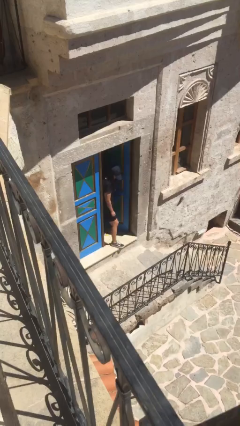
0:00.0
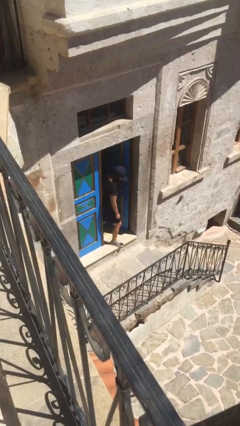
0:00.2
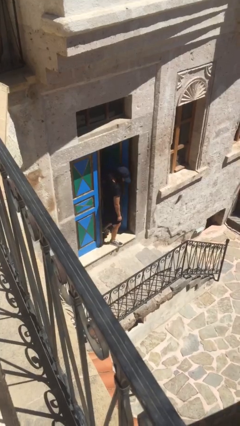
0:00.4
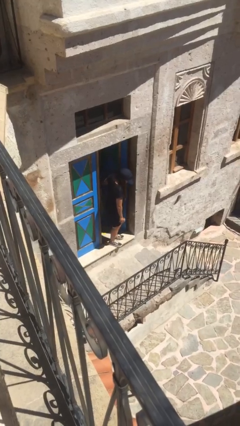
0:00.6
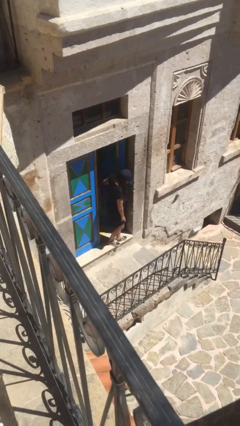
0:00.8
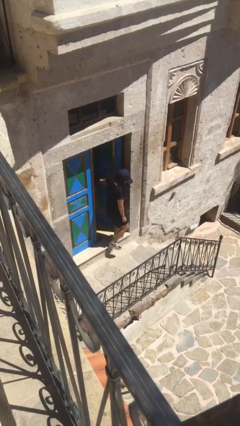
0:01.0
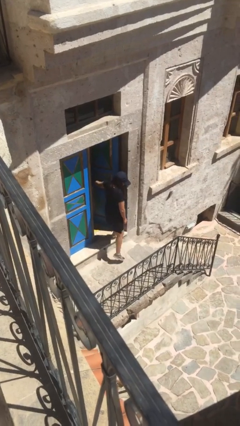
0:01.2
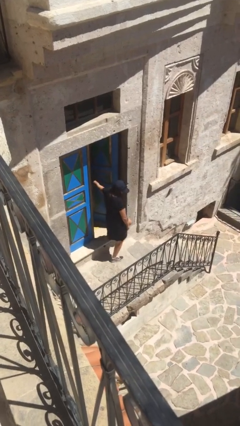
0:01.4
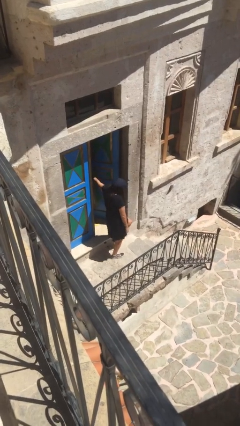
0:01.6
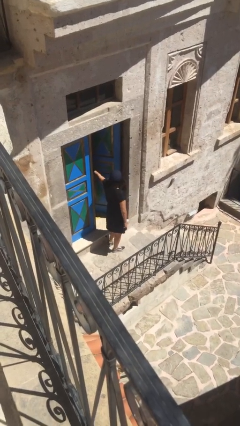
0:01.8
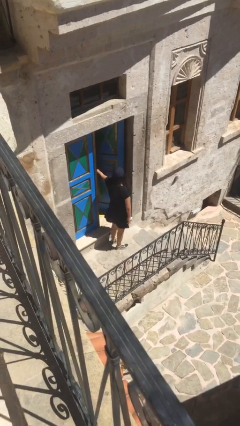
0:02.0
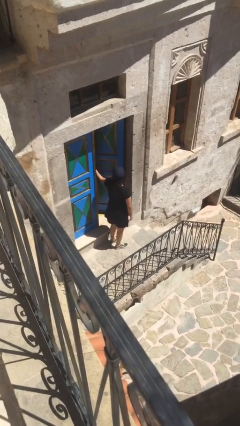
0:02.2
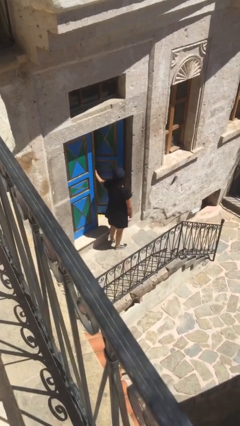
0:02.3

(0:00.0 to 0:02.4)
person enters scene through structure

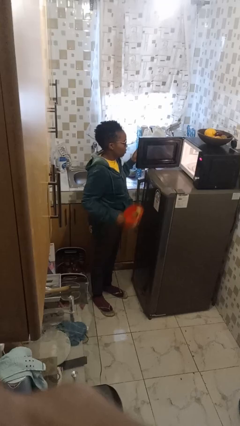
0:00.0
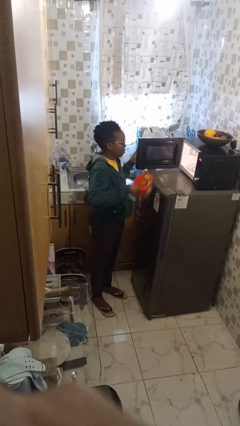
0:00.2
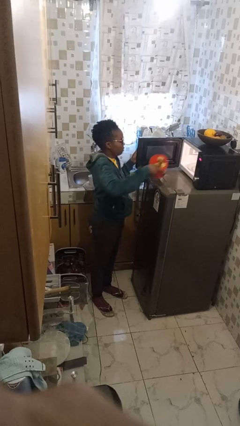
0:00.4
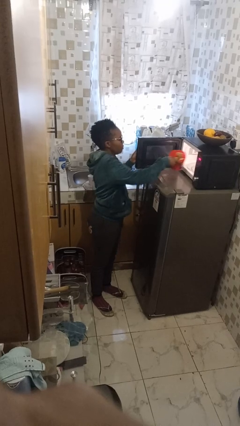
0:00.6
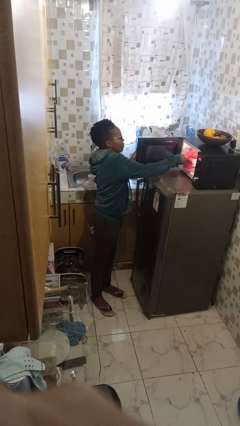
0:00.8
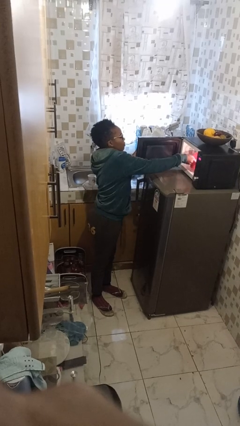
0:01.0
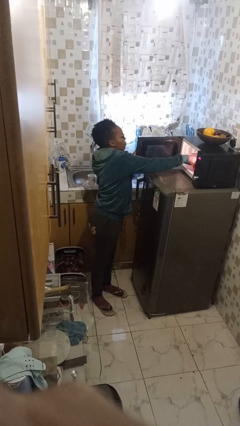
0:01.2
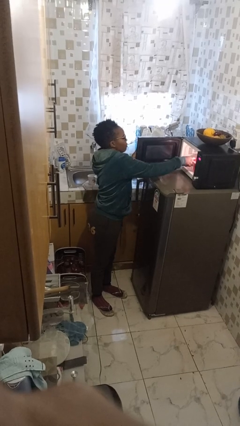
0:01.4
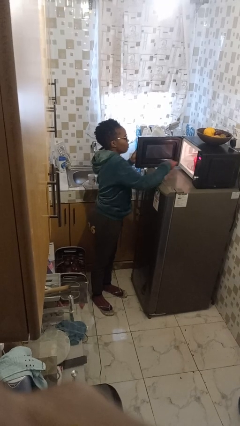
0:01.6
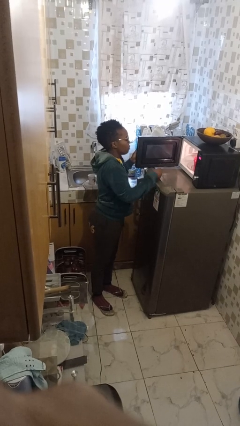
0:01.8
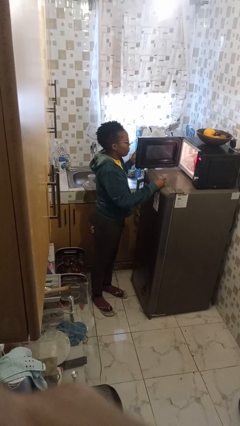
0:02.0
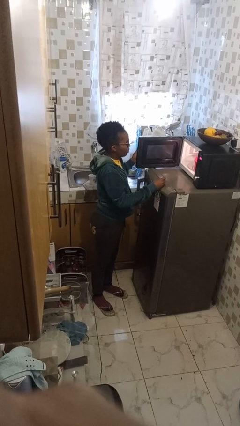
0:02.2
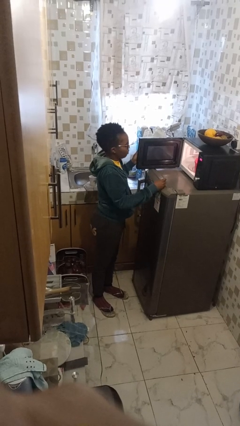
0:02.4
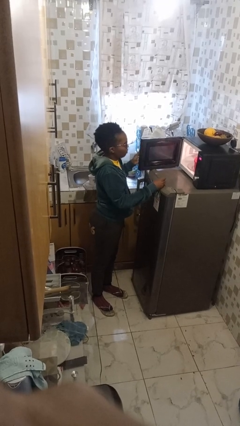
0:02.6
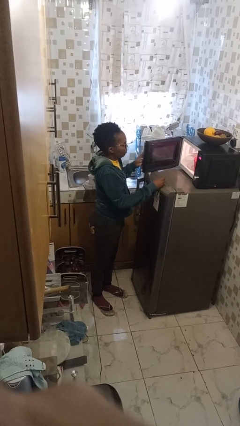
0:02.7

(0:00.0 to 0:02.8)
person puts object into microwave

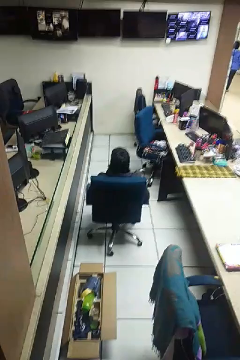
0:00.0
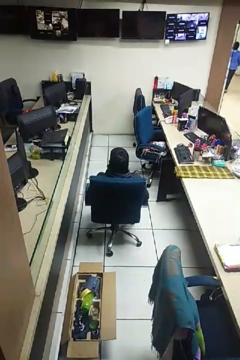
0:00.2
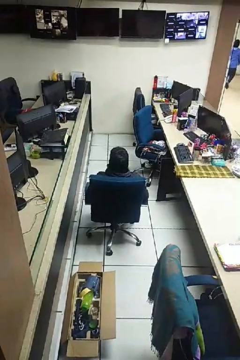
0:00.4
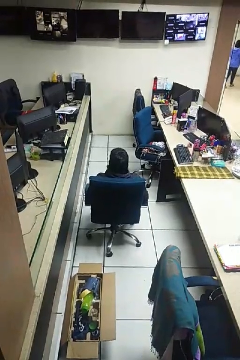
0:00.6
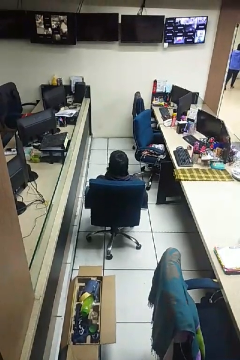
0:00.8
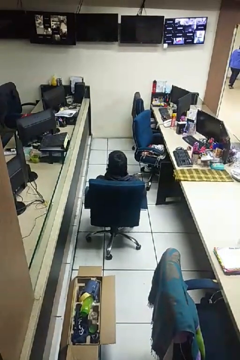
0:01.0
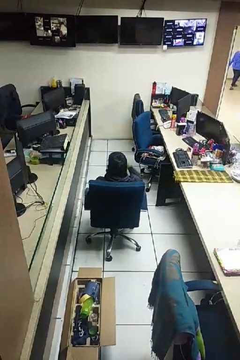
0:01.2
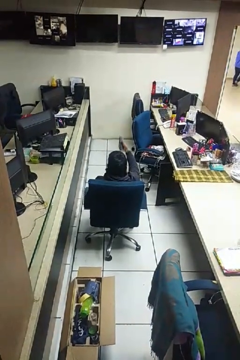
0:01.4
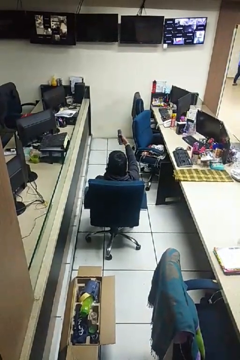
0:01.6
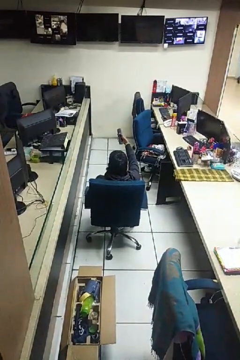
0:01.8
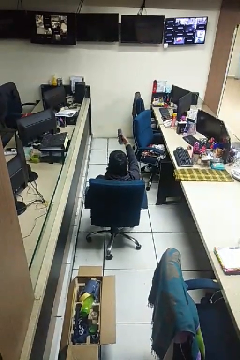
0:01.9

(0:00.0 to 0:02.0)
person uses television remote

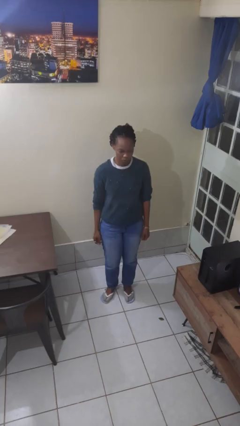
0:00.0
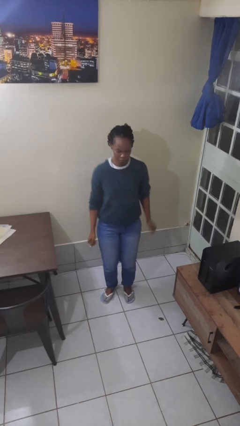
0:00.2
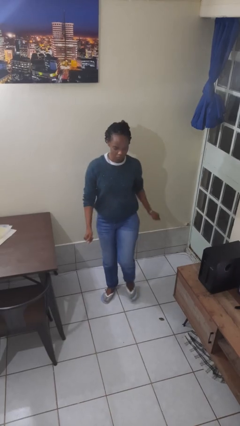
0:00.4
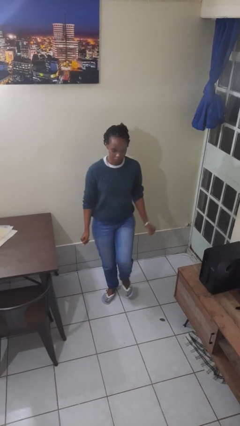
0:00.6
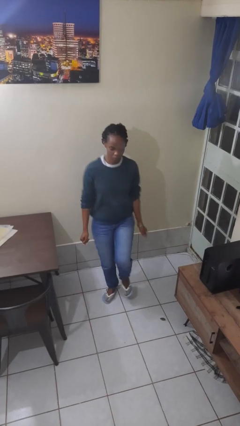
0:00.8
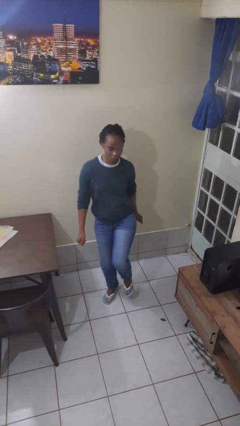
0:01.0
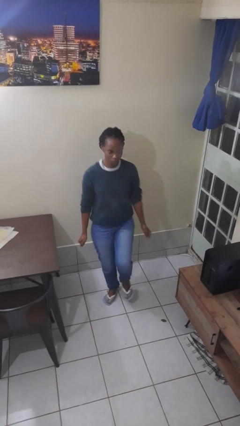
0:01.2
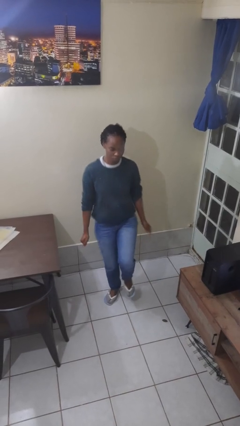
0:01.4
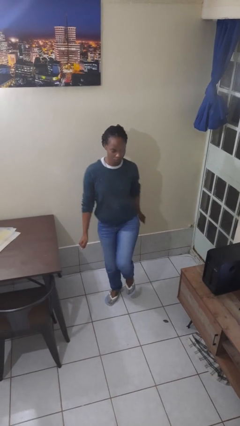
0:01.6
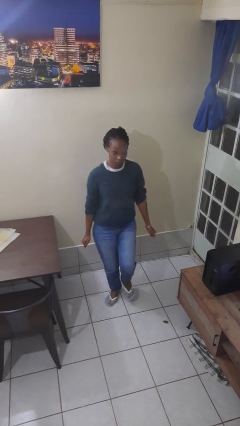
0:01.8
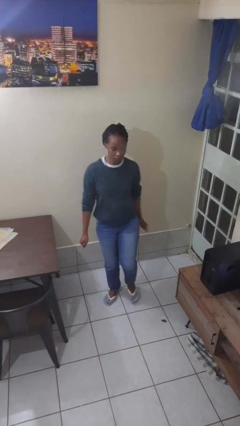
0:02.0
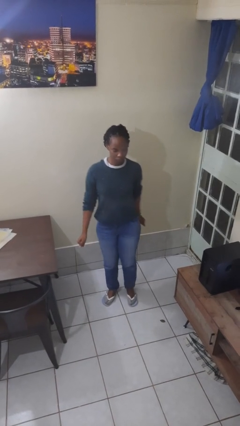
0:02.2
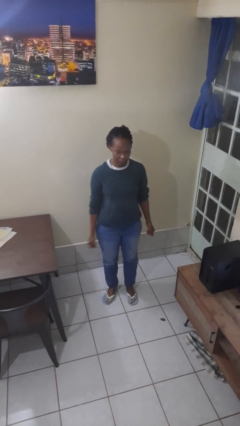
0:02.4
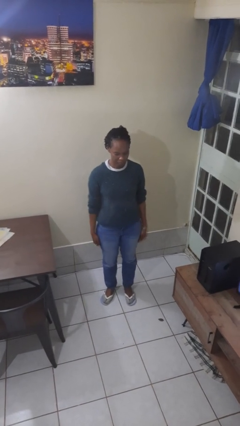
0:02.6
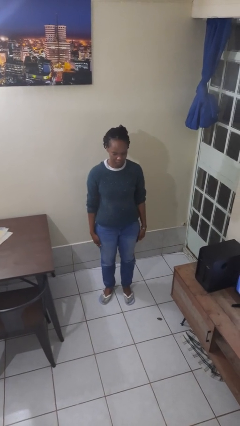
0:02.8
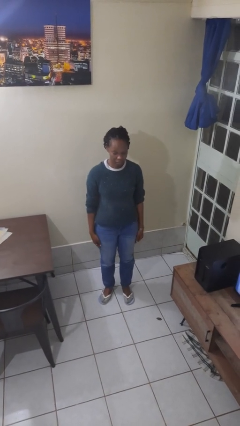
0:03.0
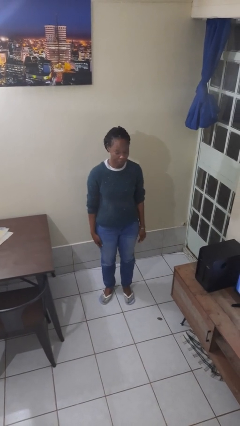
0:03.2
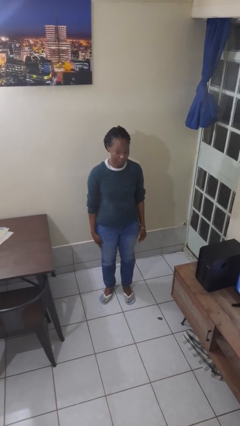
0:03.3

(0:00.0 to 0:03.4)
person dances in place

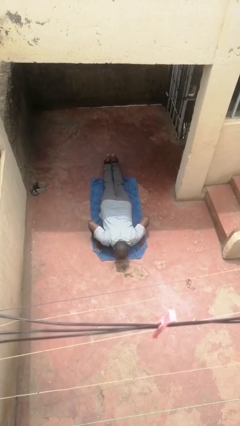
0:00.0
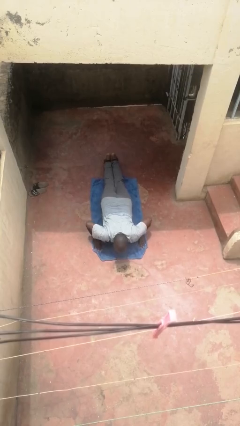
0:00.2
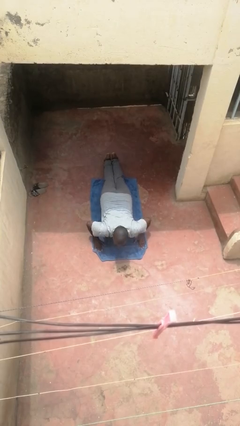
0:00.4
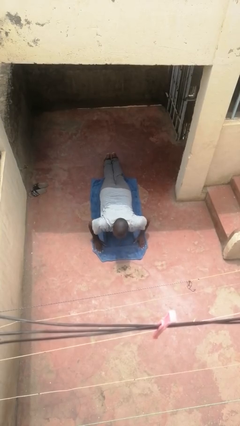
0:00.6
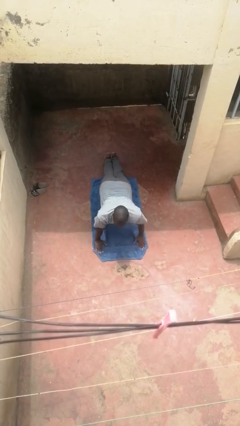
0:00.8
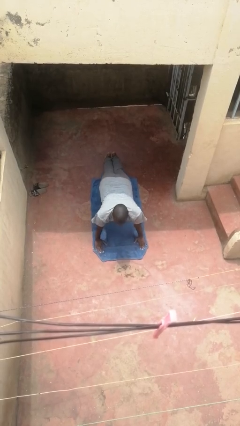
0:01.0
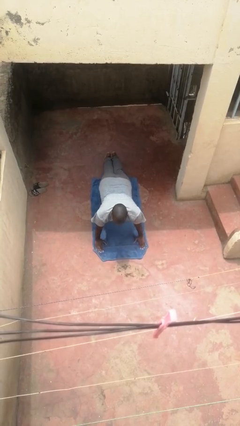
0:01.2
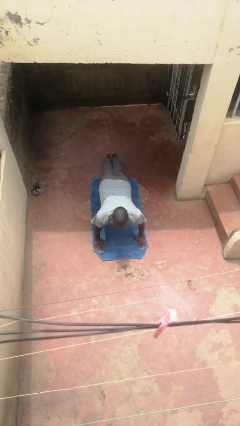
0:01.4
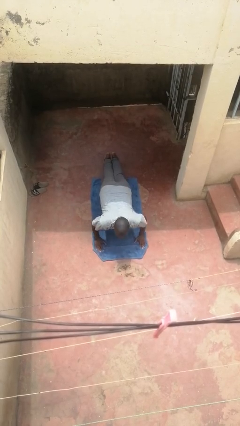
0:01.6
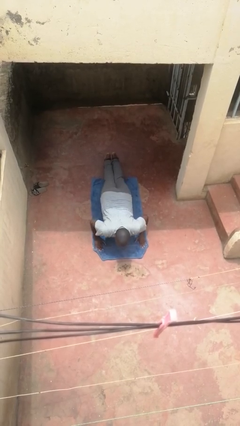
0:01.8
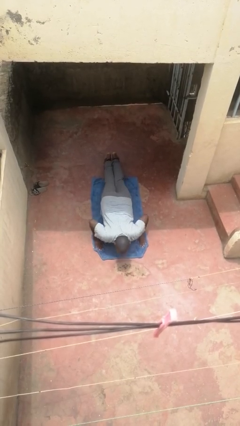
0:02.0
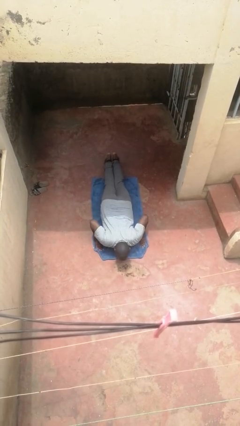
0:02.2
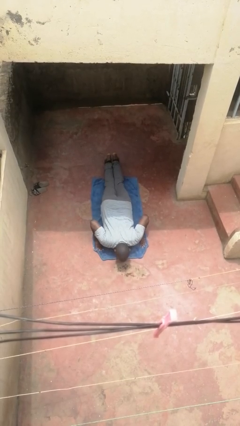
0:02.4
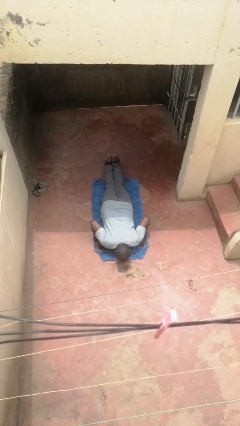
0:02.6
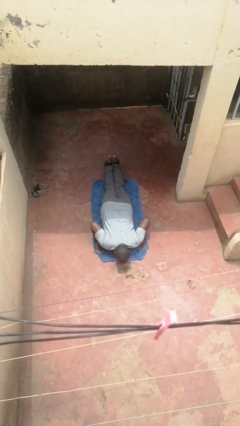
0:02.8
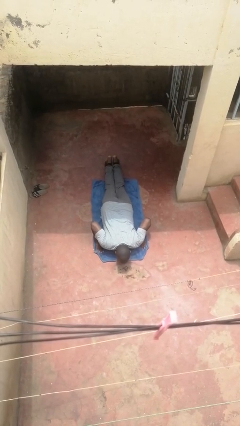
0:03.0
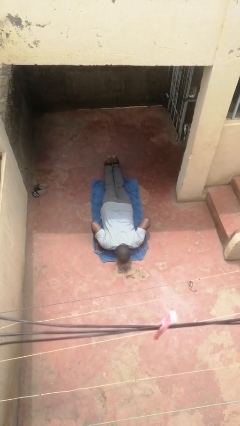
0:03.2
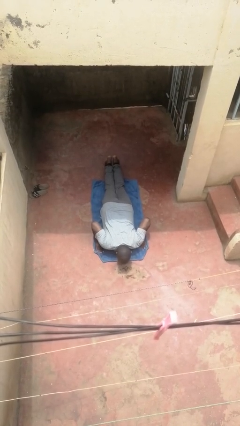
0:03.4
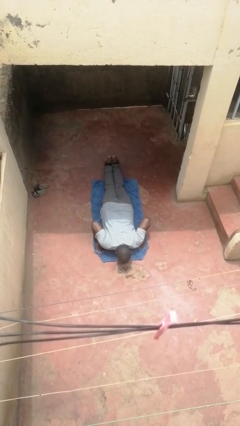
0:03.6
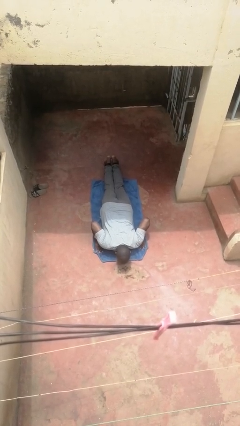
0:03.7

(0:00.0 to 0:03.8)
person exercises with pushup

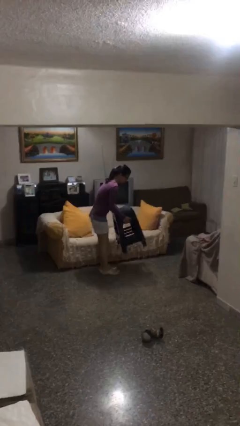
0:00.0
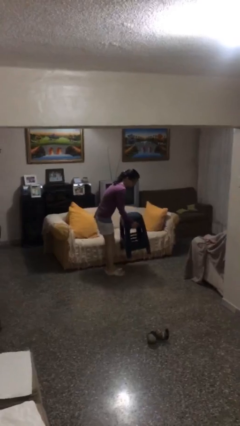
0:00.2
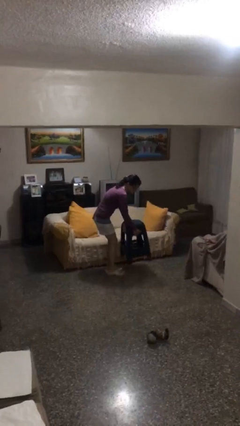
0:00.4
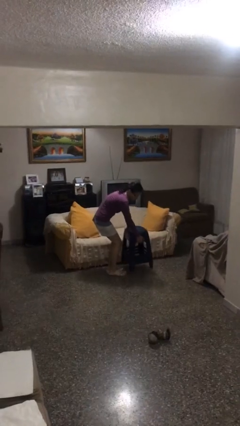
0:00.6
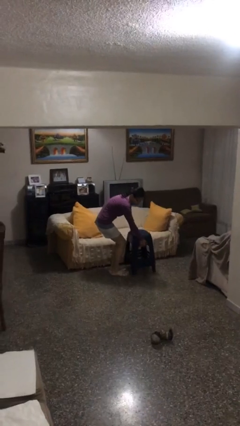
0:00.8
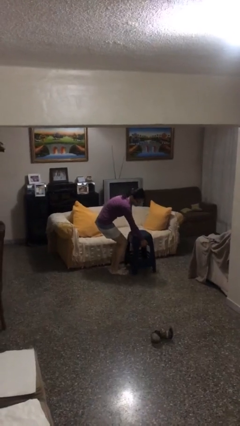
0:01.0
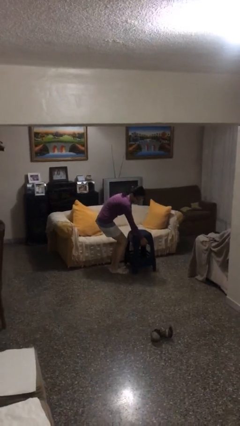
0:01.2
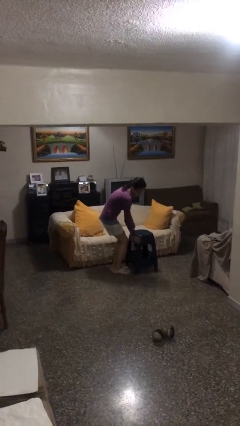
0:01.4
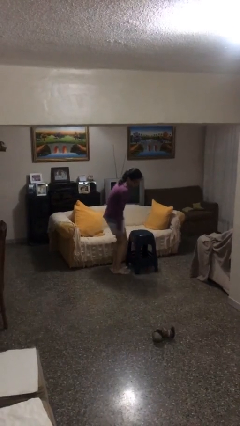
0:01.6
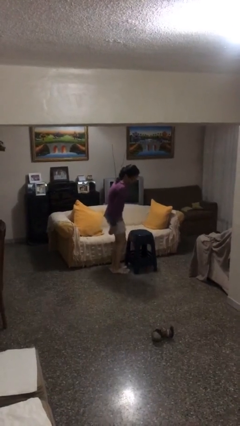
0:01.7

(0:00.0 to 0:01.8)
person puts down object on floor

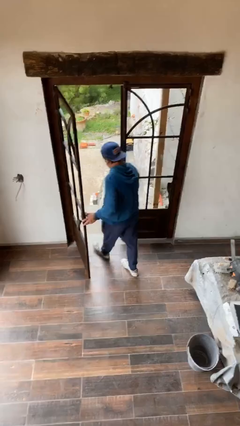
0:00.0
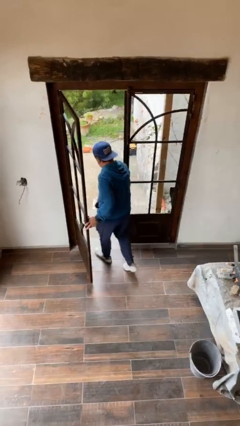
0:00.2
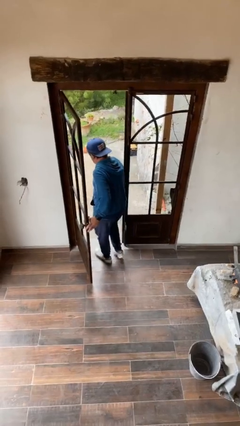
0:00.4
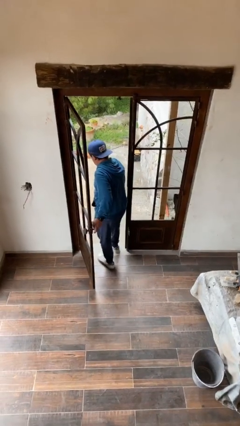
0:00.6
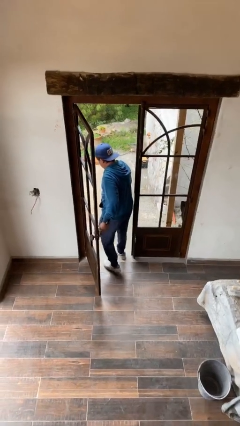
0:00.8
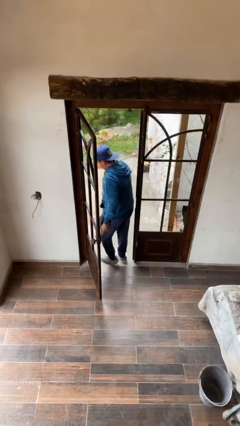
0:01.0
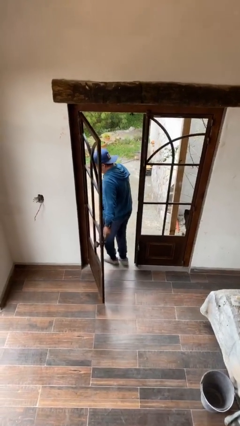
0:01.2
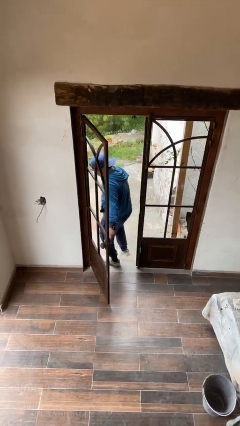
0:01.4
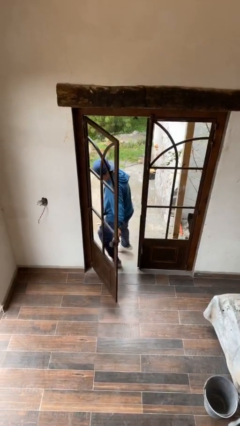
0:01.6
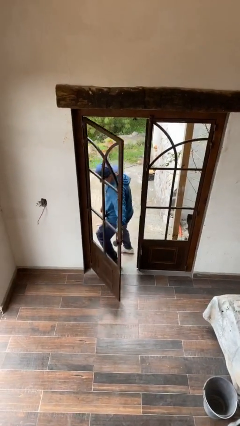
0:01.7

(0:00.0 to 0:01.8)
person exits scene through structure
